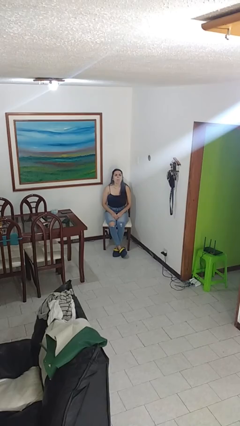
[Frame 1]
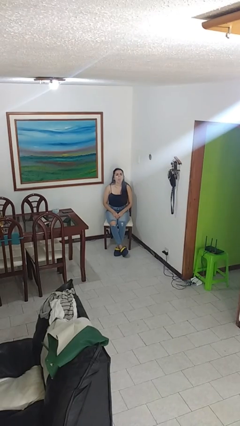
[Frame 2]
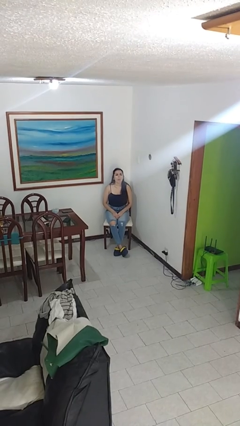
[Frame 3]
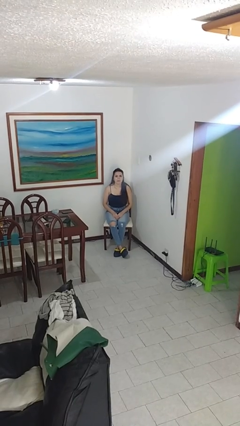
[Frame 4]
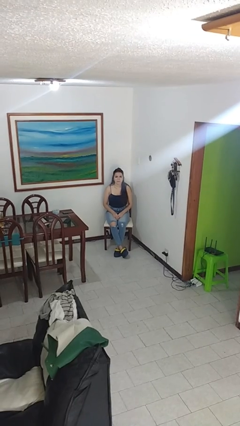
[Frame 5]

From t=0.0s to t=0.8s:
person sticks out tongue

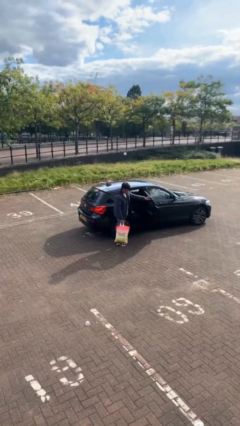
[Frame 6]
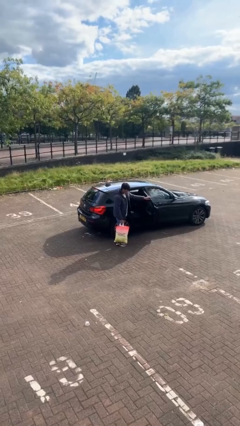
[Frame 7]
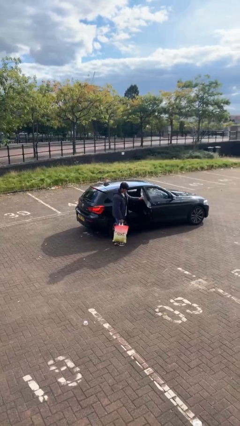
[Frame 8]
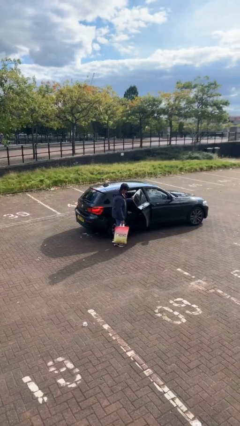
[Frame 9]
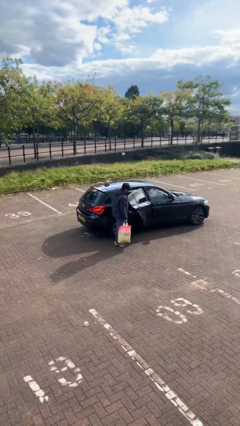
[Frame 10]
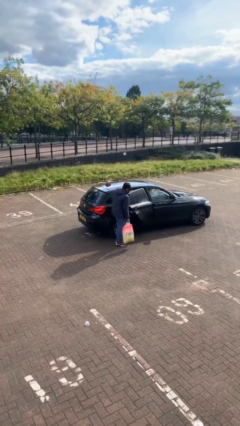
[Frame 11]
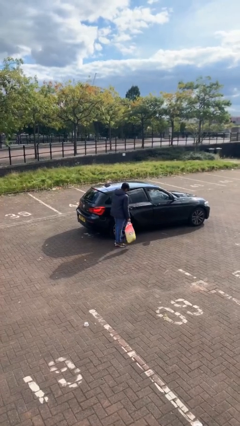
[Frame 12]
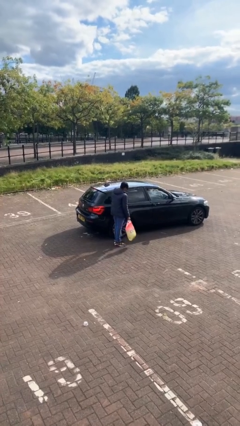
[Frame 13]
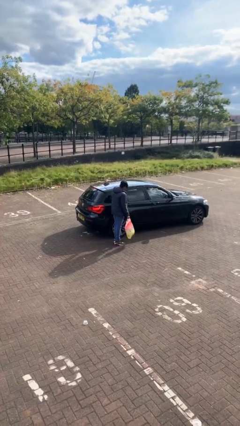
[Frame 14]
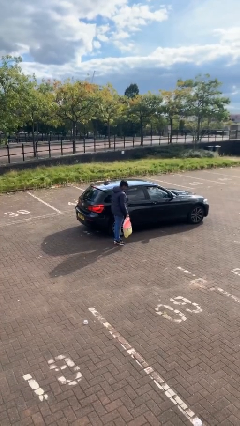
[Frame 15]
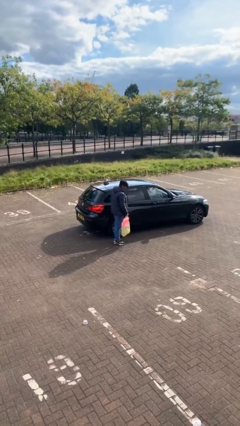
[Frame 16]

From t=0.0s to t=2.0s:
person closes car door

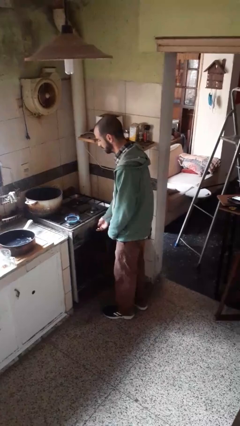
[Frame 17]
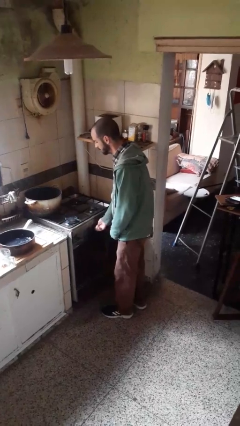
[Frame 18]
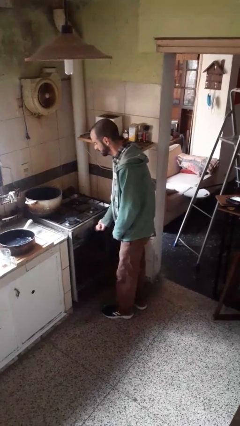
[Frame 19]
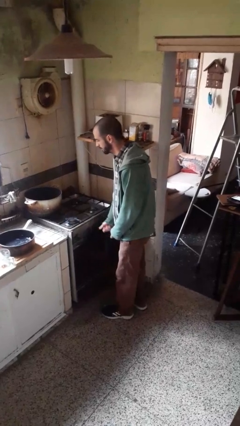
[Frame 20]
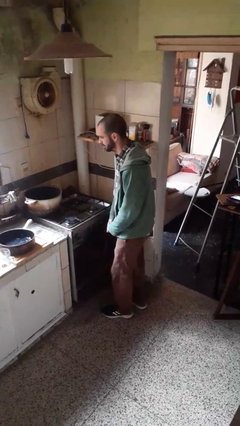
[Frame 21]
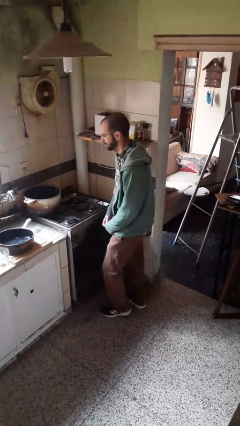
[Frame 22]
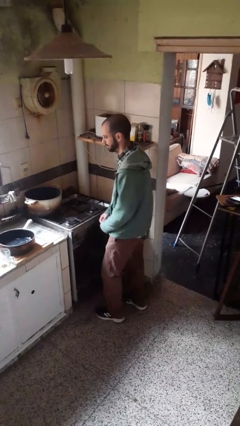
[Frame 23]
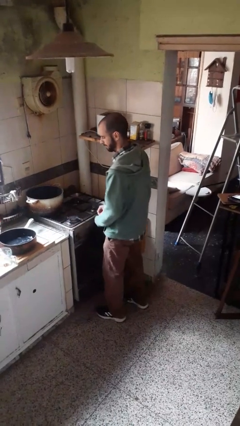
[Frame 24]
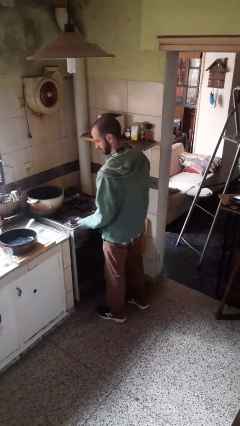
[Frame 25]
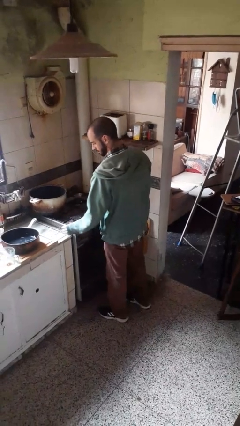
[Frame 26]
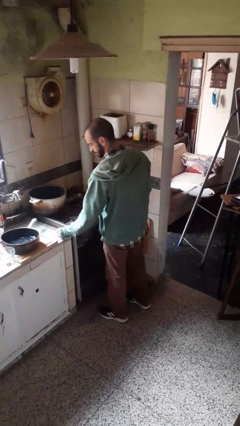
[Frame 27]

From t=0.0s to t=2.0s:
person turns off stovetop

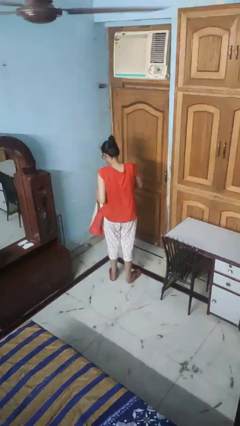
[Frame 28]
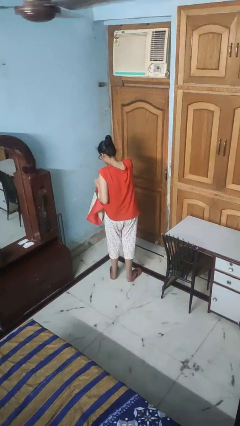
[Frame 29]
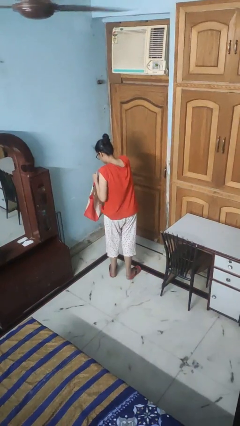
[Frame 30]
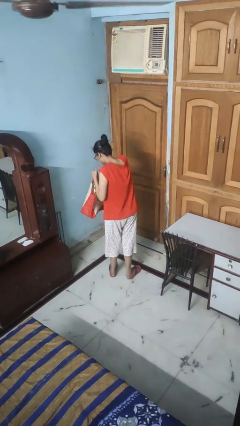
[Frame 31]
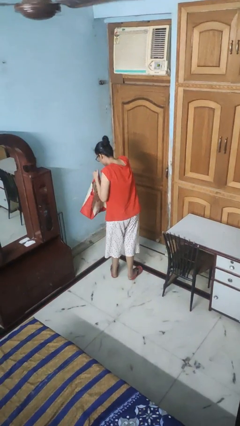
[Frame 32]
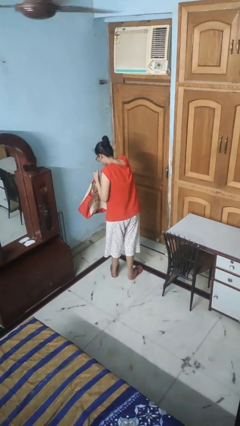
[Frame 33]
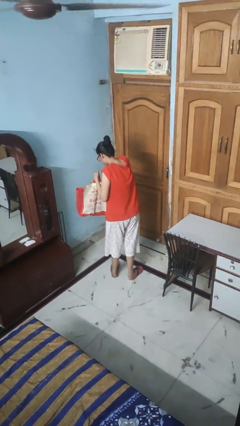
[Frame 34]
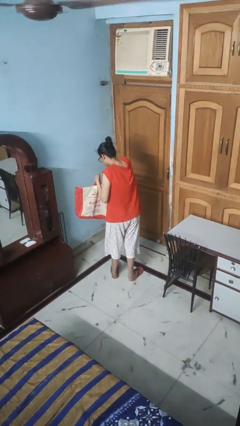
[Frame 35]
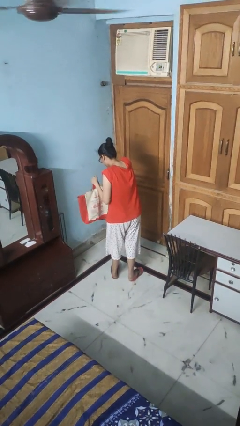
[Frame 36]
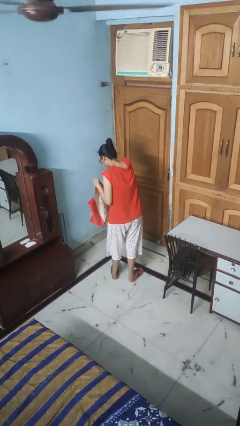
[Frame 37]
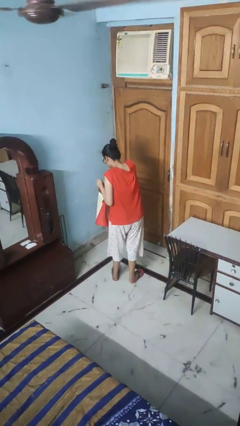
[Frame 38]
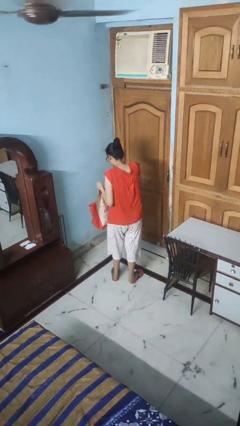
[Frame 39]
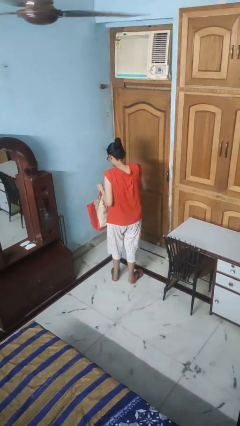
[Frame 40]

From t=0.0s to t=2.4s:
person searches in bag

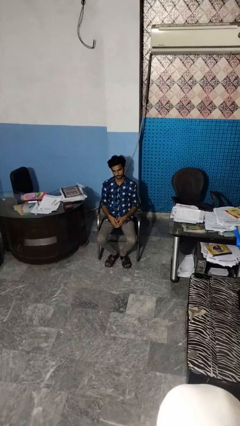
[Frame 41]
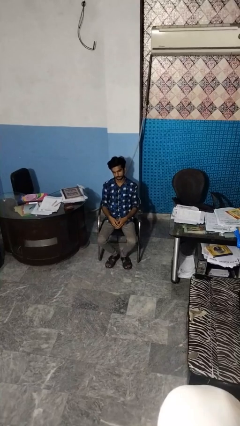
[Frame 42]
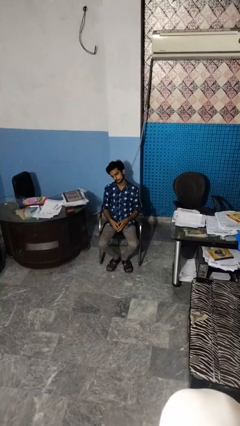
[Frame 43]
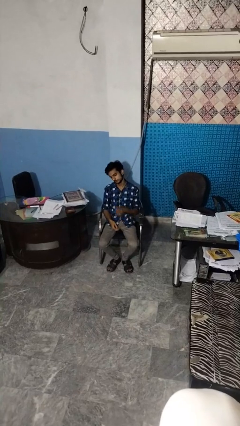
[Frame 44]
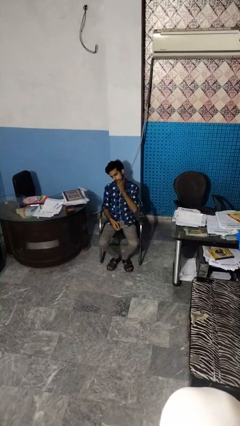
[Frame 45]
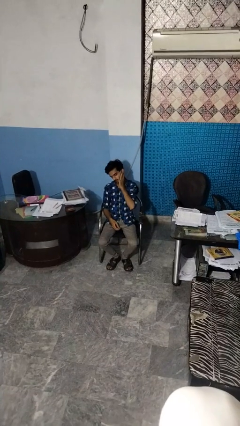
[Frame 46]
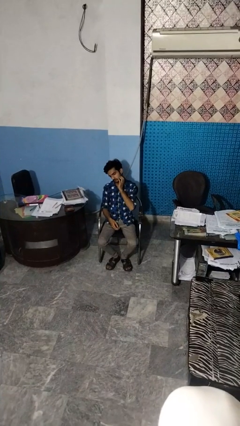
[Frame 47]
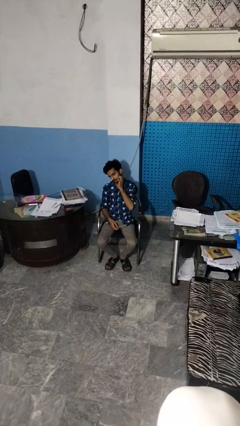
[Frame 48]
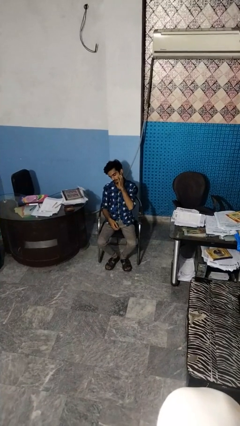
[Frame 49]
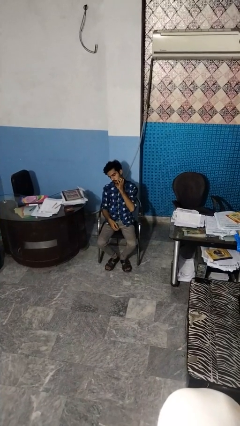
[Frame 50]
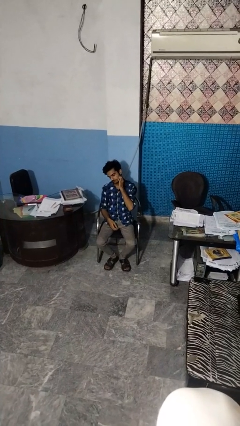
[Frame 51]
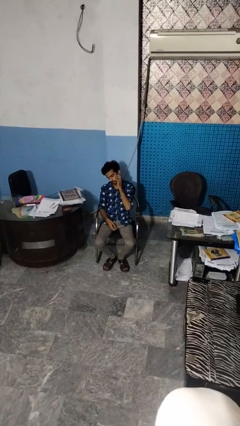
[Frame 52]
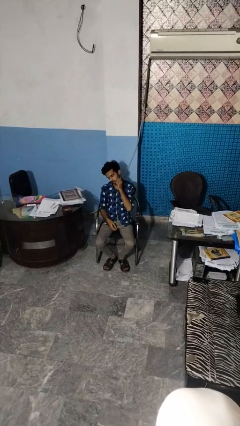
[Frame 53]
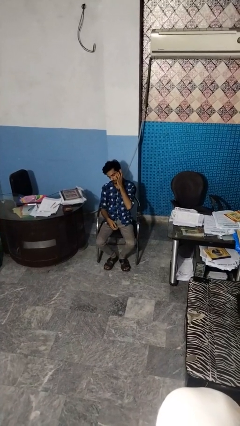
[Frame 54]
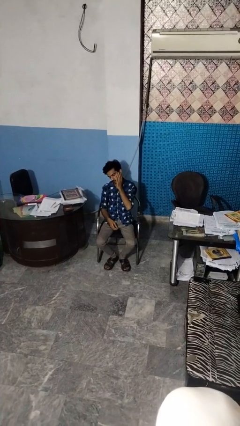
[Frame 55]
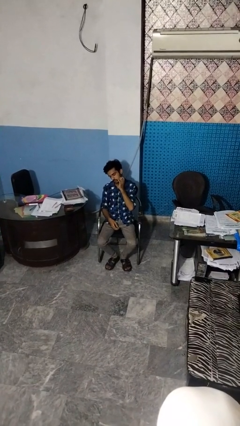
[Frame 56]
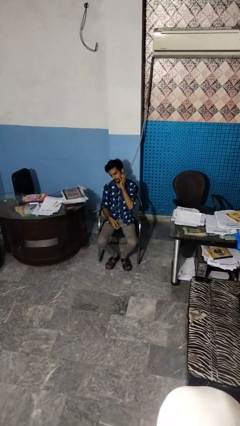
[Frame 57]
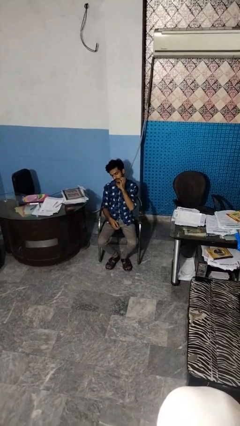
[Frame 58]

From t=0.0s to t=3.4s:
person scratches face

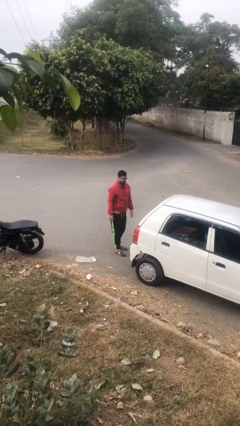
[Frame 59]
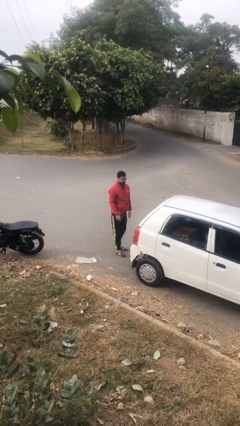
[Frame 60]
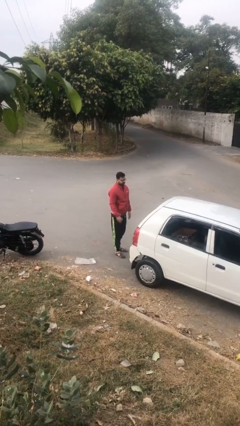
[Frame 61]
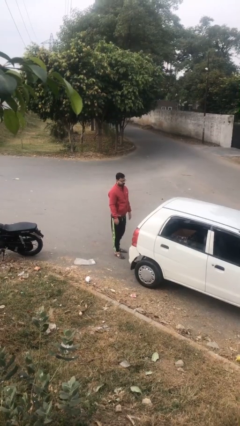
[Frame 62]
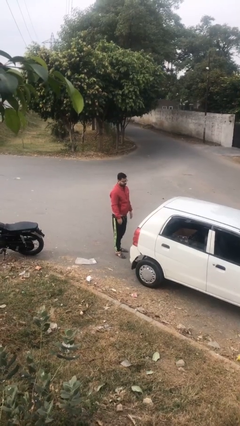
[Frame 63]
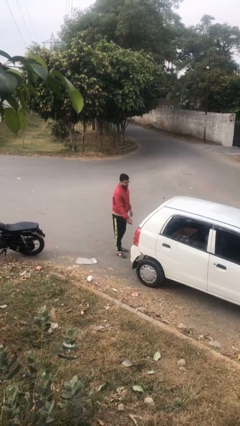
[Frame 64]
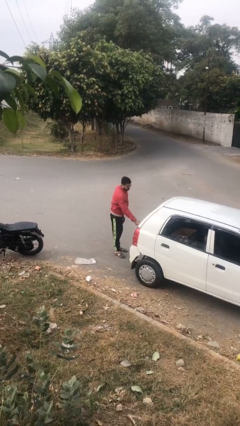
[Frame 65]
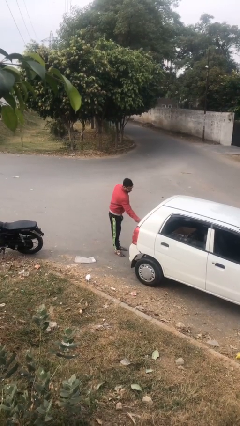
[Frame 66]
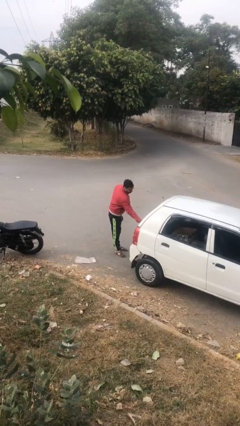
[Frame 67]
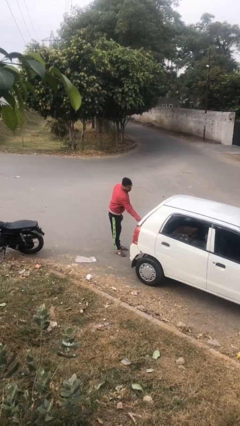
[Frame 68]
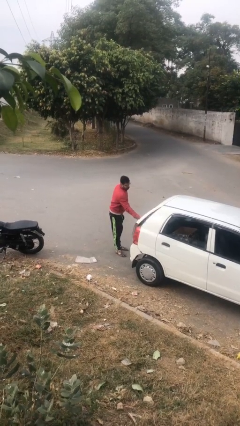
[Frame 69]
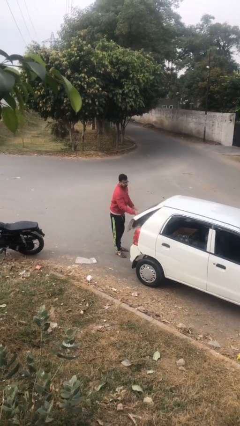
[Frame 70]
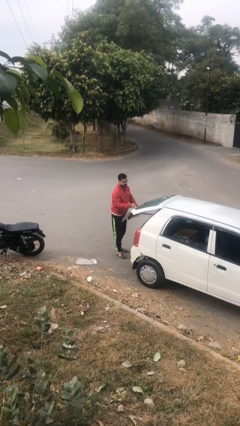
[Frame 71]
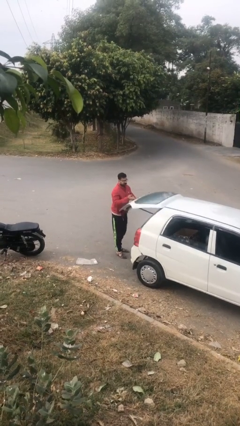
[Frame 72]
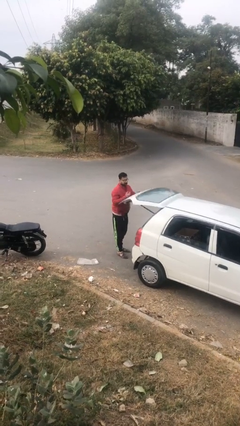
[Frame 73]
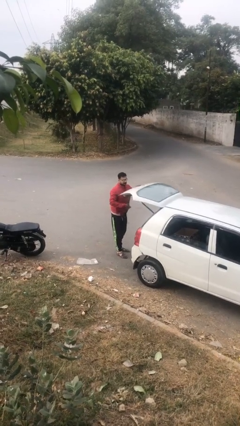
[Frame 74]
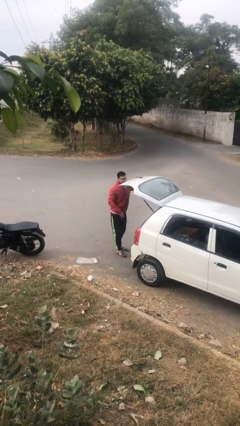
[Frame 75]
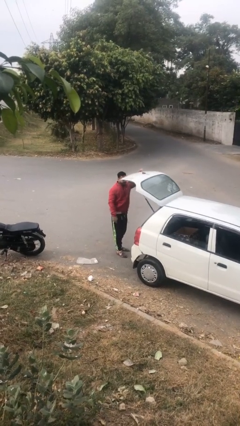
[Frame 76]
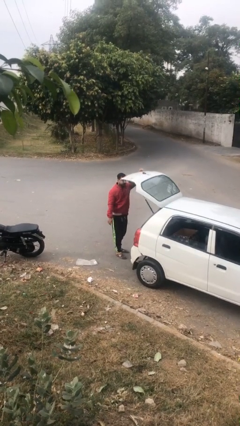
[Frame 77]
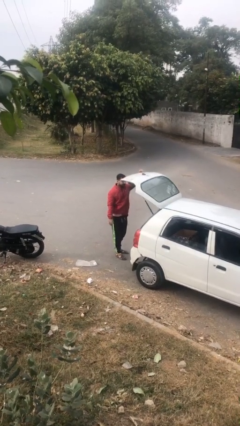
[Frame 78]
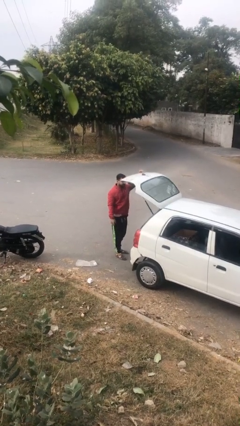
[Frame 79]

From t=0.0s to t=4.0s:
person opens car trunk

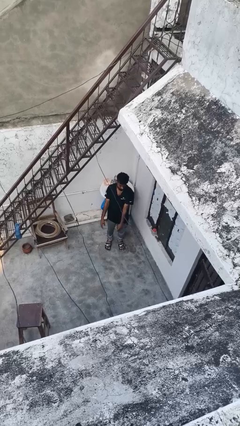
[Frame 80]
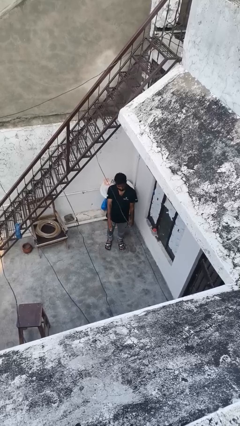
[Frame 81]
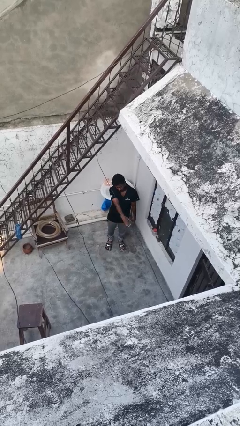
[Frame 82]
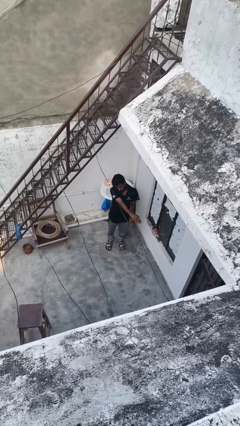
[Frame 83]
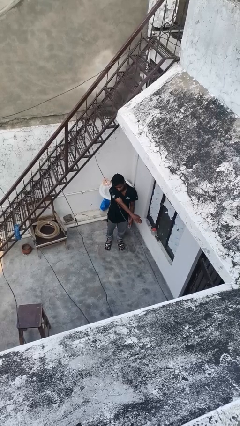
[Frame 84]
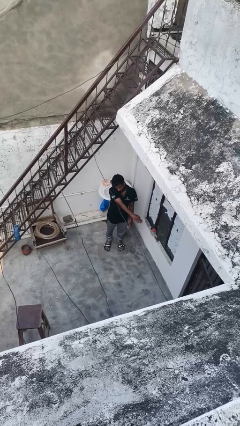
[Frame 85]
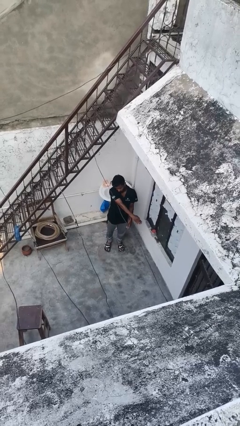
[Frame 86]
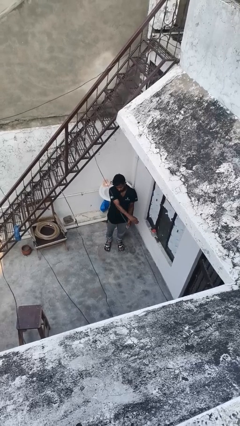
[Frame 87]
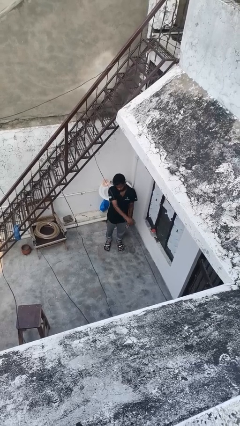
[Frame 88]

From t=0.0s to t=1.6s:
person gestures swipe right

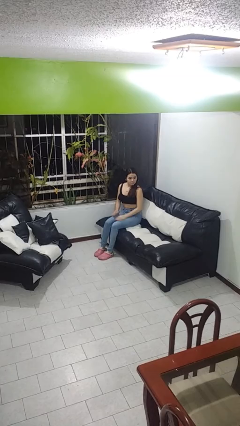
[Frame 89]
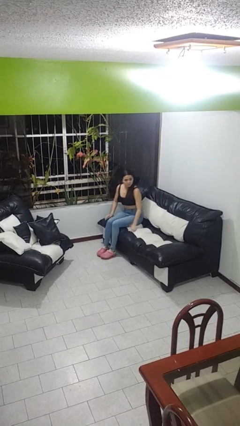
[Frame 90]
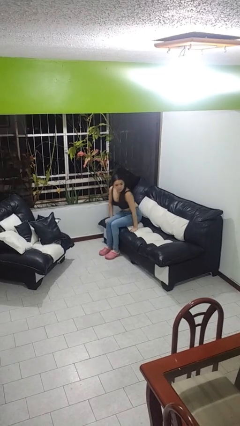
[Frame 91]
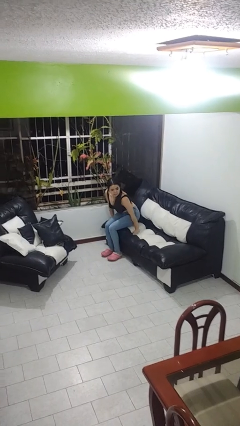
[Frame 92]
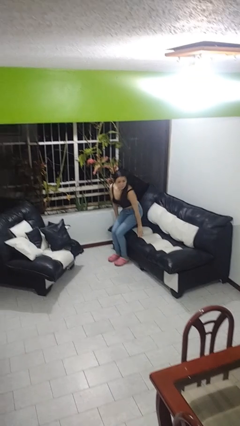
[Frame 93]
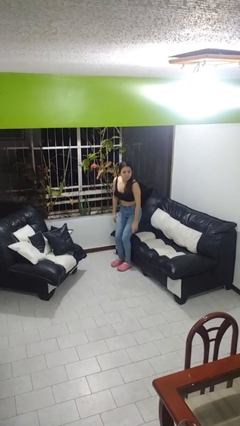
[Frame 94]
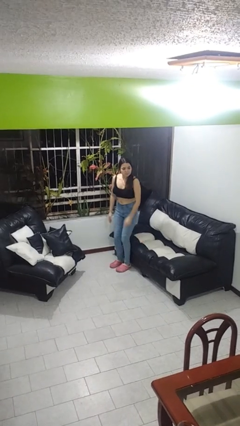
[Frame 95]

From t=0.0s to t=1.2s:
person stands up
